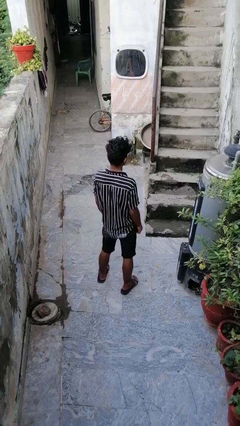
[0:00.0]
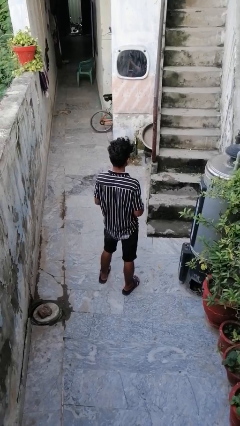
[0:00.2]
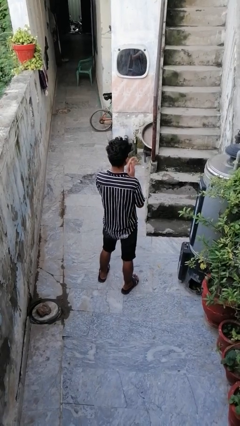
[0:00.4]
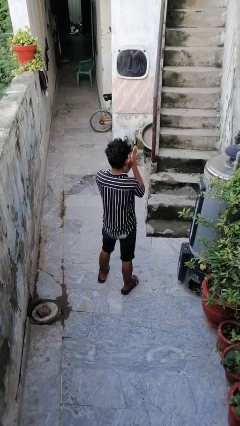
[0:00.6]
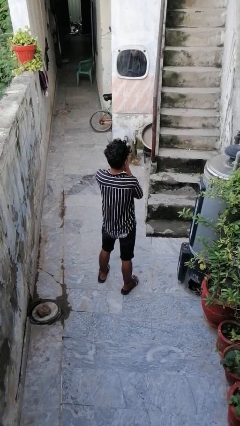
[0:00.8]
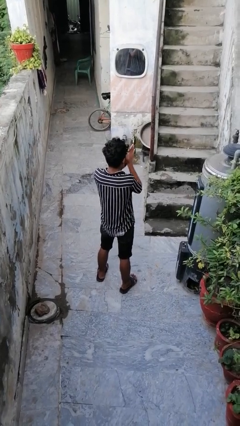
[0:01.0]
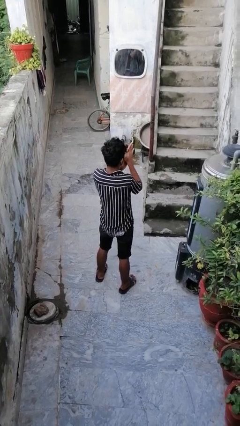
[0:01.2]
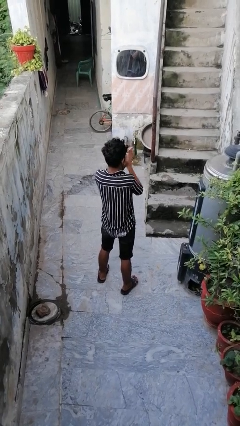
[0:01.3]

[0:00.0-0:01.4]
person blows into hands

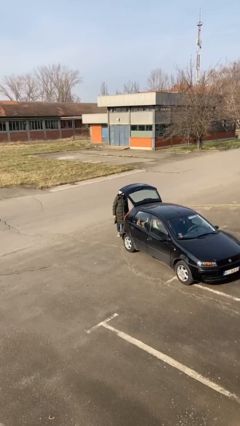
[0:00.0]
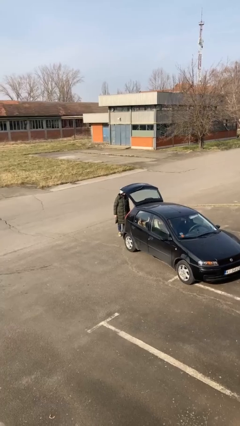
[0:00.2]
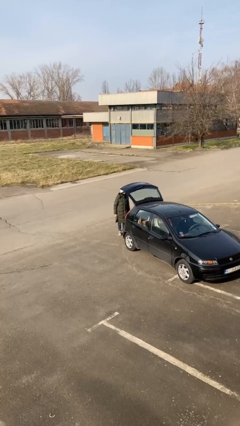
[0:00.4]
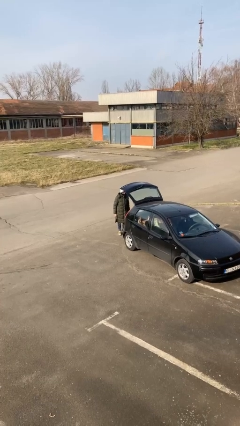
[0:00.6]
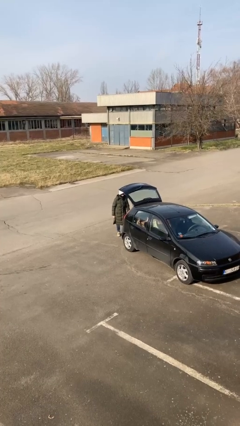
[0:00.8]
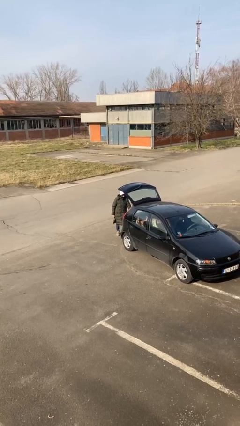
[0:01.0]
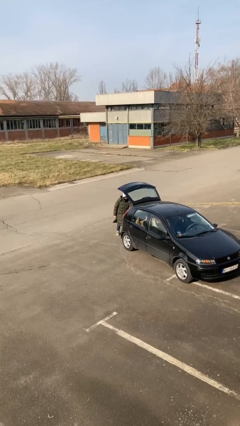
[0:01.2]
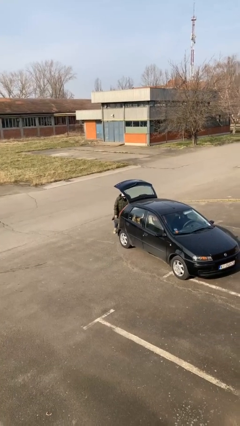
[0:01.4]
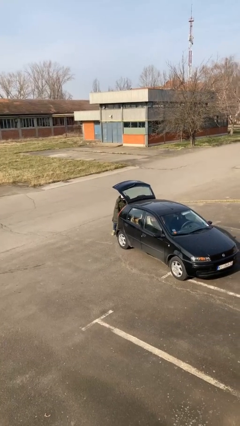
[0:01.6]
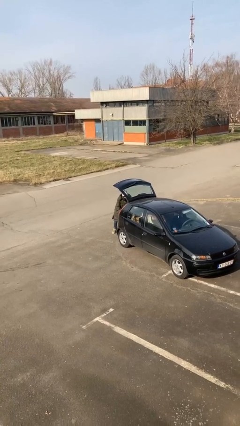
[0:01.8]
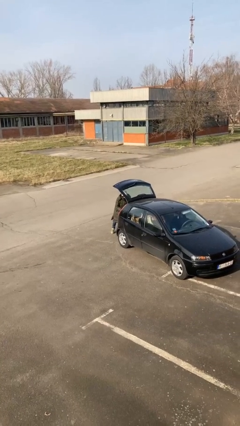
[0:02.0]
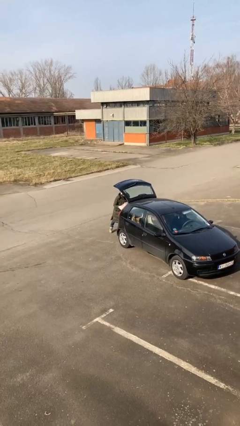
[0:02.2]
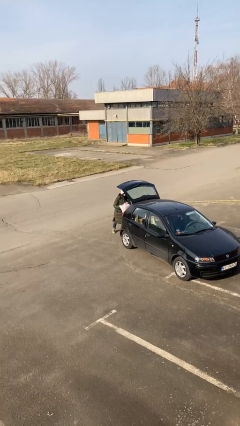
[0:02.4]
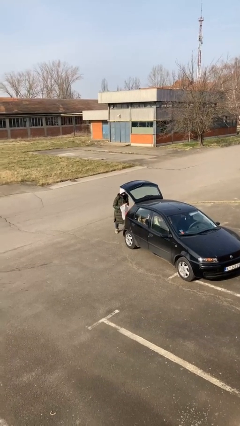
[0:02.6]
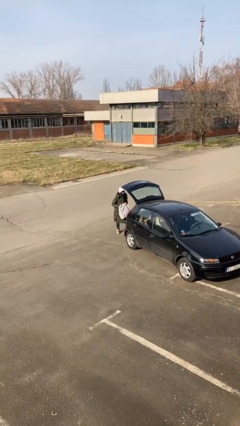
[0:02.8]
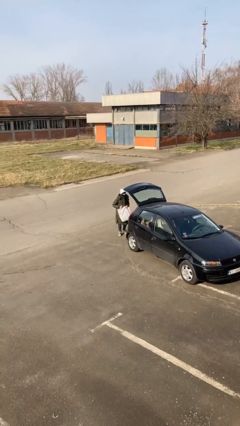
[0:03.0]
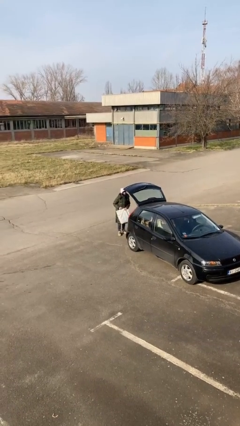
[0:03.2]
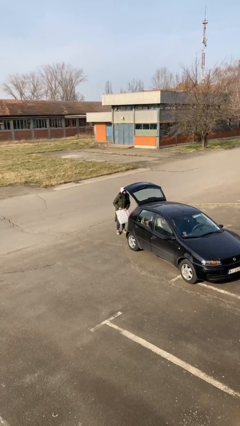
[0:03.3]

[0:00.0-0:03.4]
person unloads car

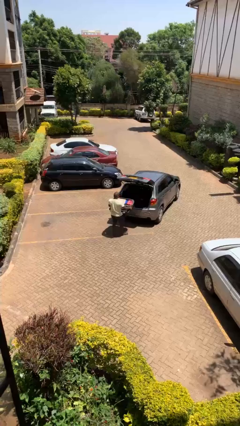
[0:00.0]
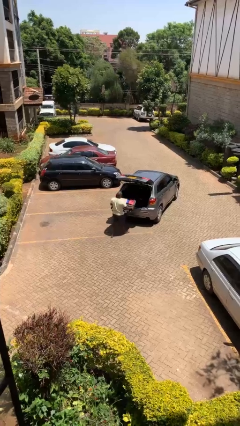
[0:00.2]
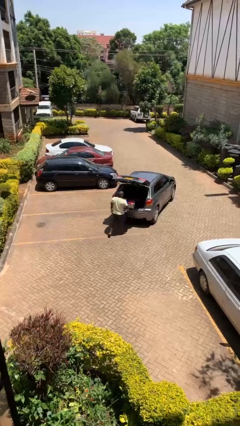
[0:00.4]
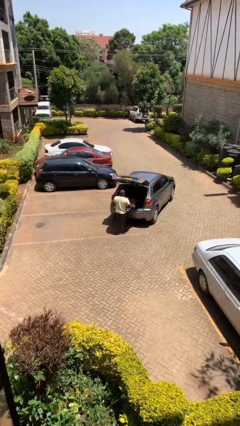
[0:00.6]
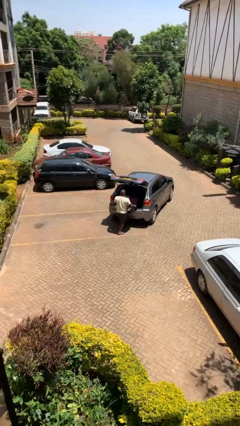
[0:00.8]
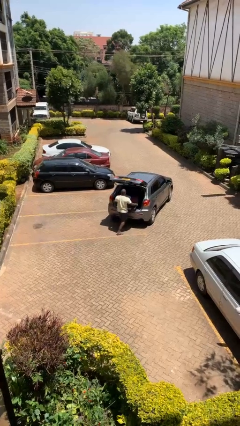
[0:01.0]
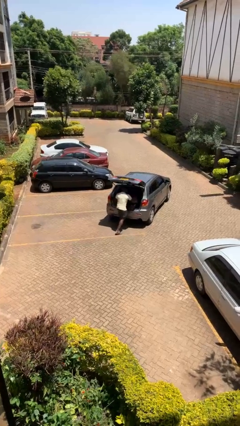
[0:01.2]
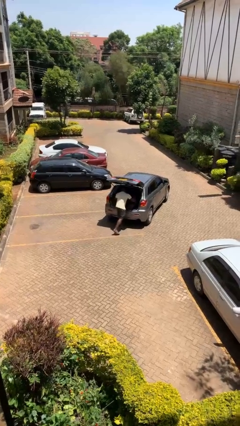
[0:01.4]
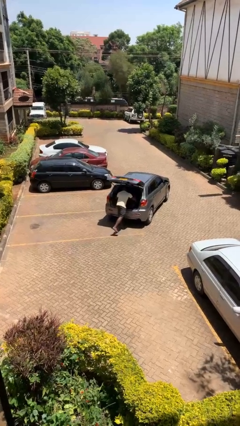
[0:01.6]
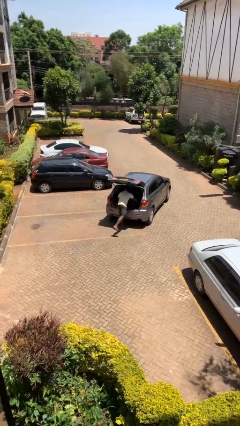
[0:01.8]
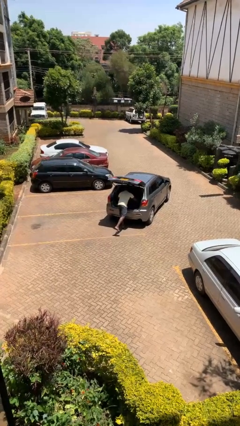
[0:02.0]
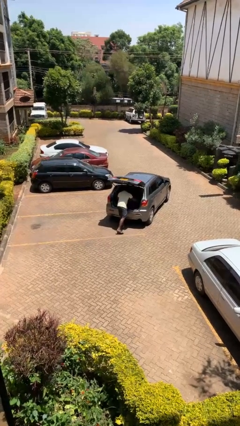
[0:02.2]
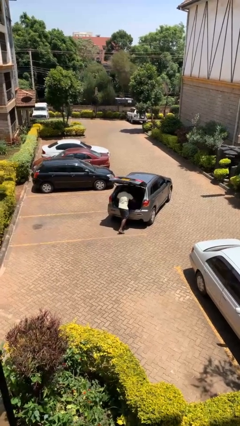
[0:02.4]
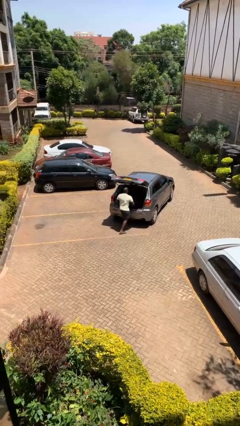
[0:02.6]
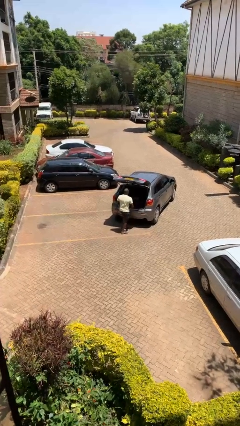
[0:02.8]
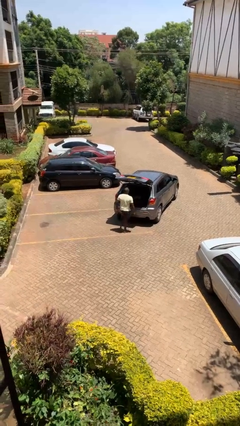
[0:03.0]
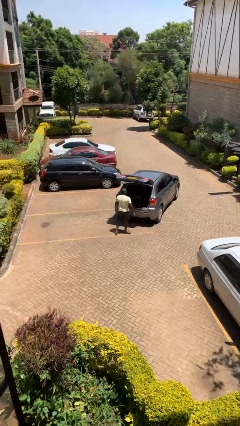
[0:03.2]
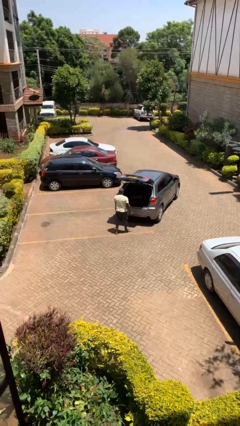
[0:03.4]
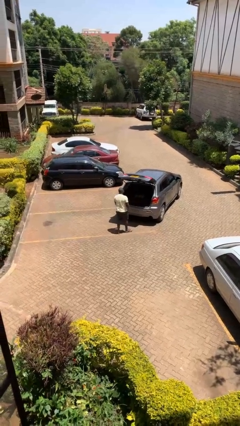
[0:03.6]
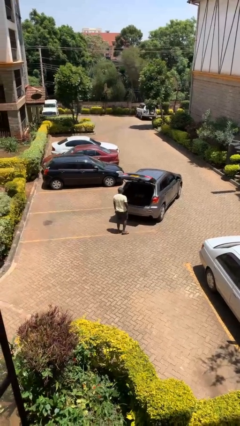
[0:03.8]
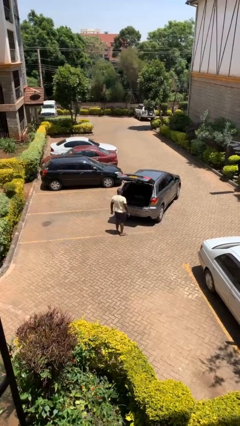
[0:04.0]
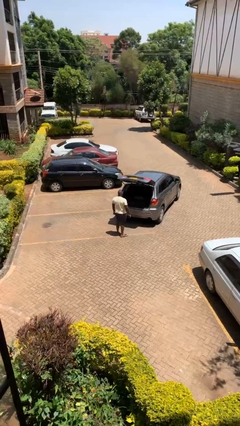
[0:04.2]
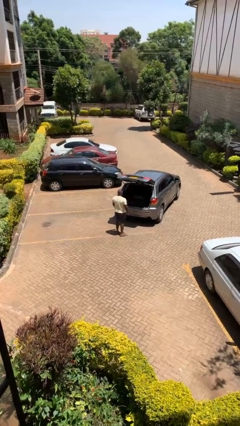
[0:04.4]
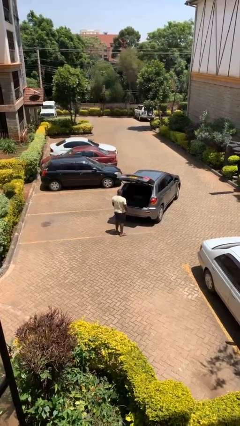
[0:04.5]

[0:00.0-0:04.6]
person loads car

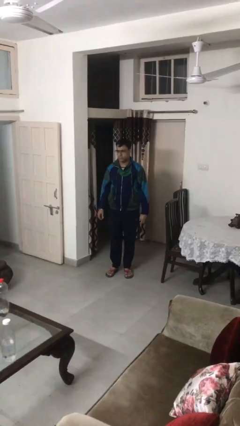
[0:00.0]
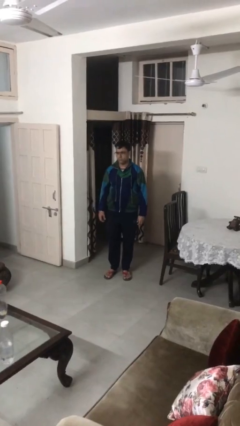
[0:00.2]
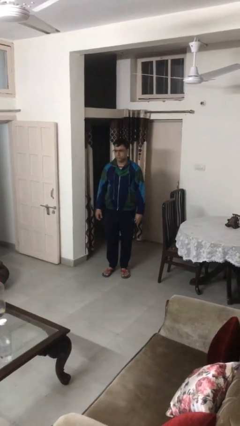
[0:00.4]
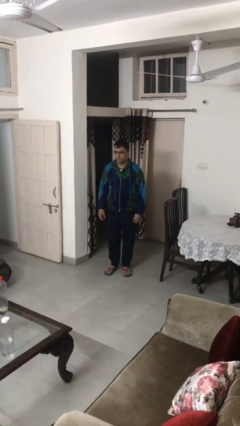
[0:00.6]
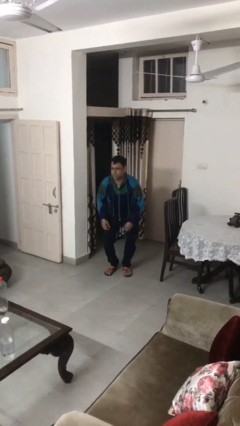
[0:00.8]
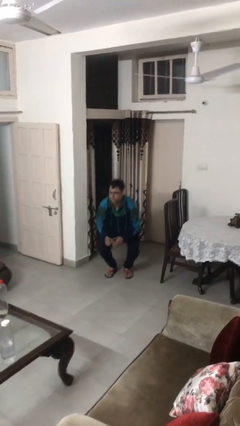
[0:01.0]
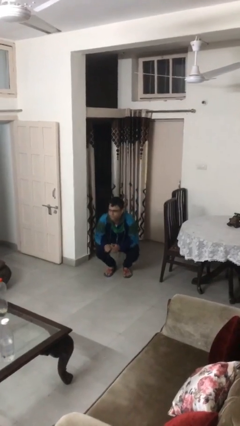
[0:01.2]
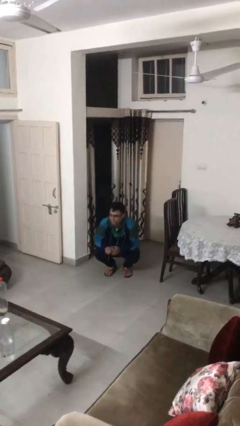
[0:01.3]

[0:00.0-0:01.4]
person sits down

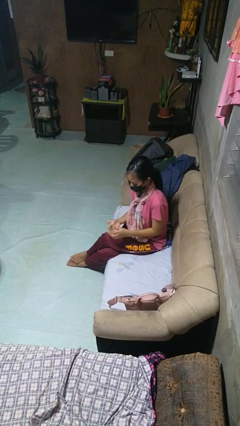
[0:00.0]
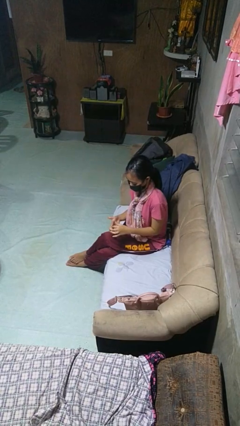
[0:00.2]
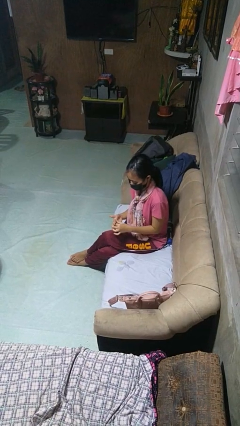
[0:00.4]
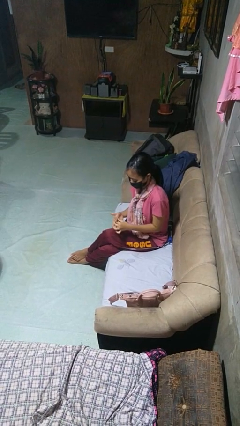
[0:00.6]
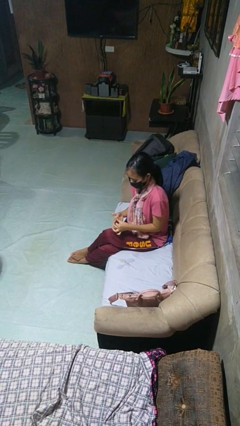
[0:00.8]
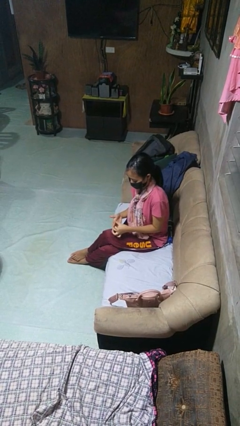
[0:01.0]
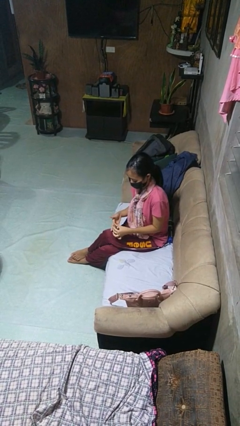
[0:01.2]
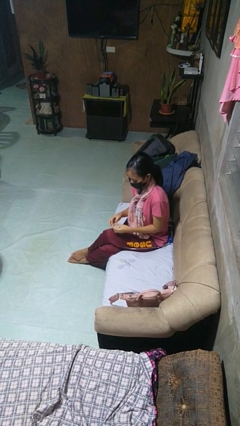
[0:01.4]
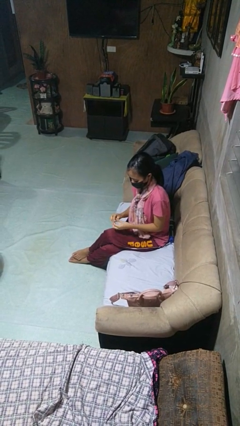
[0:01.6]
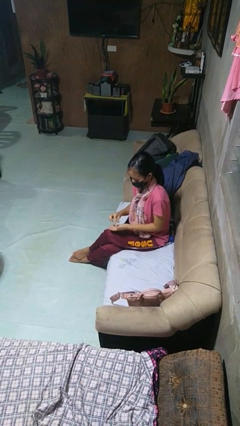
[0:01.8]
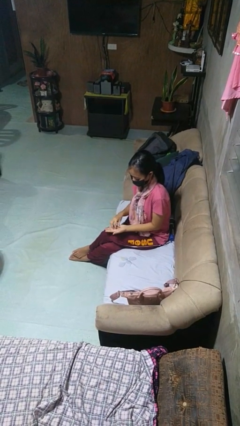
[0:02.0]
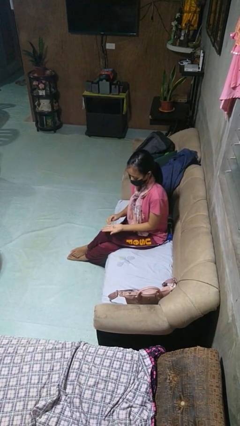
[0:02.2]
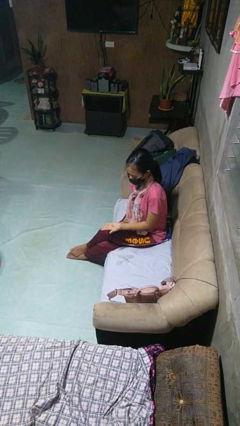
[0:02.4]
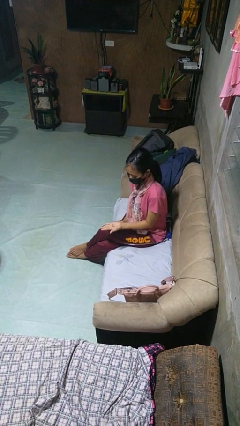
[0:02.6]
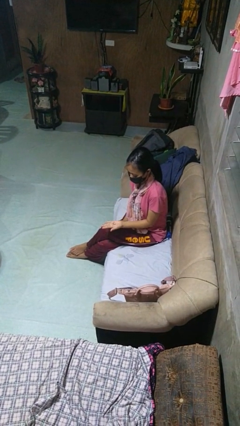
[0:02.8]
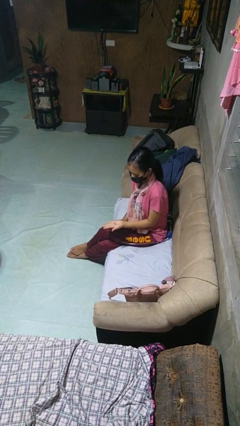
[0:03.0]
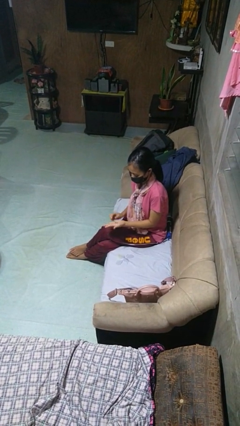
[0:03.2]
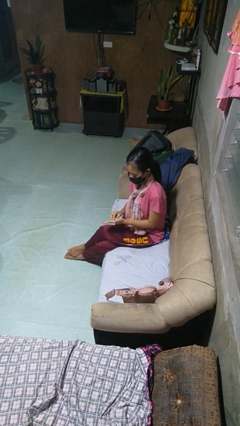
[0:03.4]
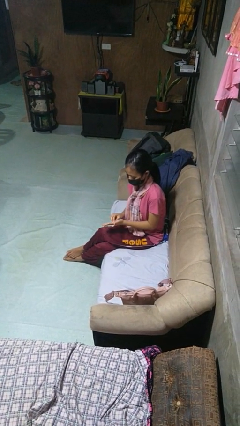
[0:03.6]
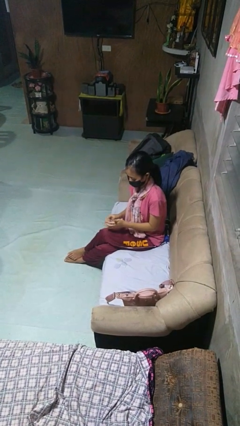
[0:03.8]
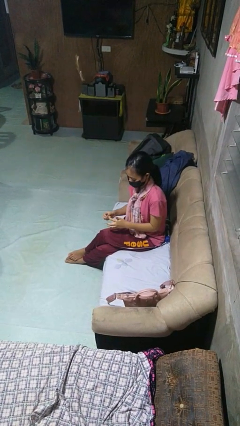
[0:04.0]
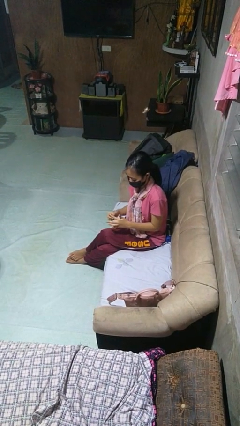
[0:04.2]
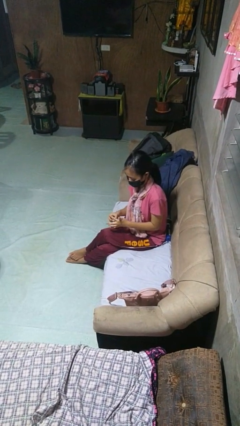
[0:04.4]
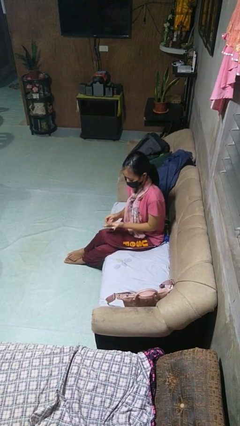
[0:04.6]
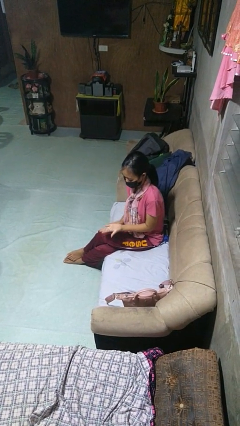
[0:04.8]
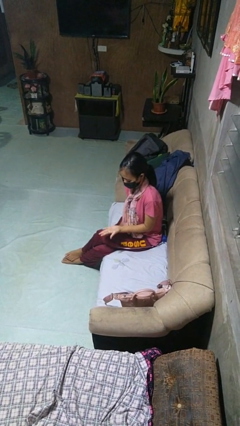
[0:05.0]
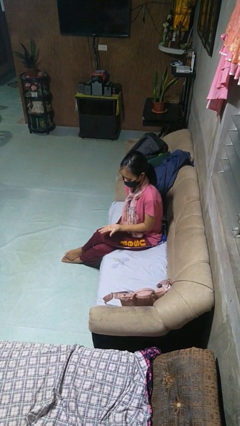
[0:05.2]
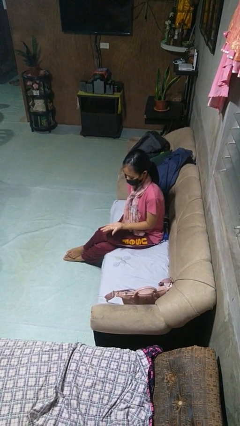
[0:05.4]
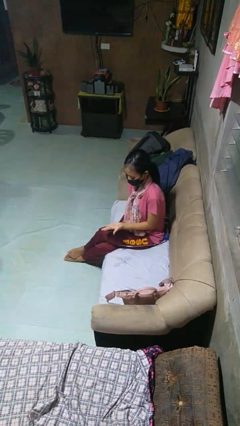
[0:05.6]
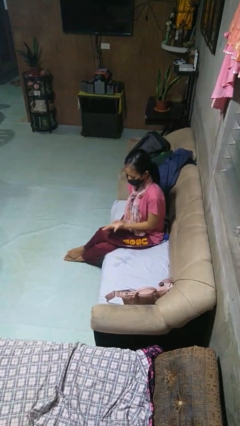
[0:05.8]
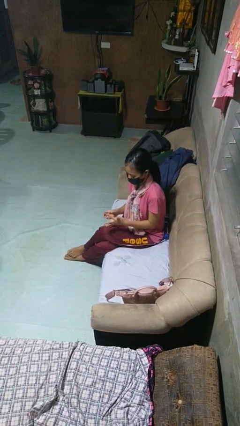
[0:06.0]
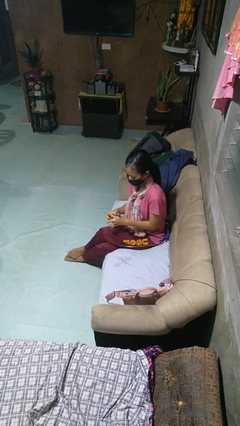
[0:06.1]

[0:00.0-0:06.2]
person takes off ring

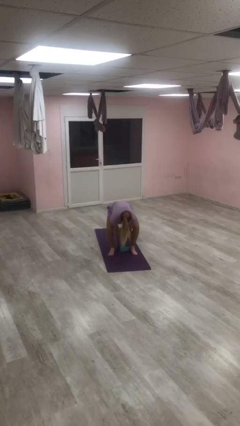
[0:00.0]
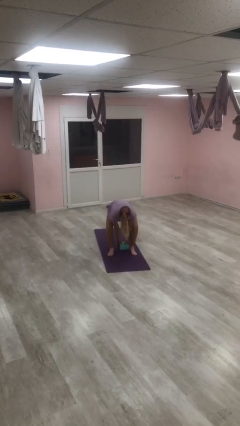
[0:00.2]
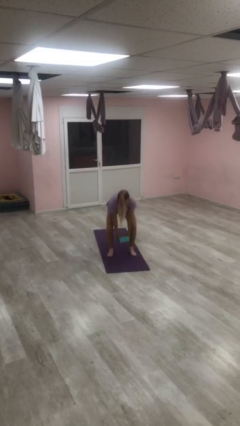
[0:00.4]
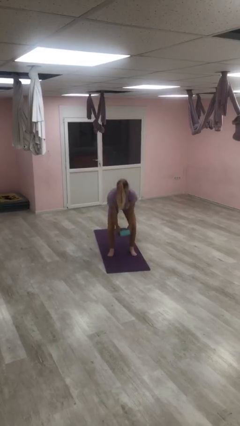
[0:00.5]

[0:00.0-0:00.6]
person picks up object from floor
